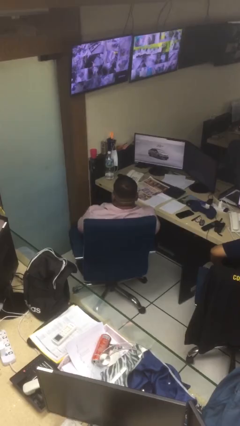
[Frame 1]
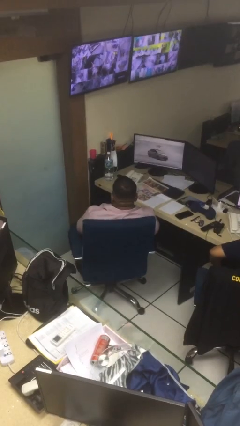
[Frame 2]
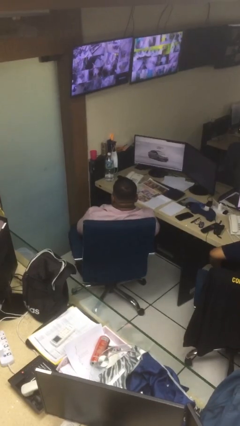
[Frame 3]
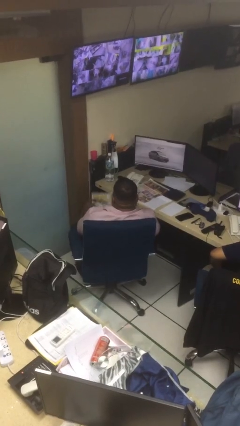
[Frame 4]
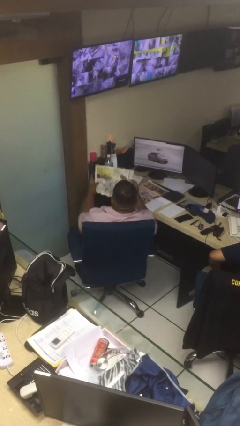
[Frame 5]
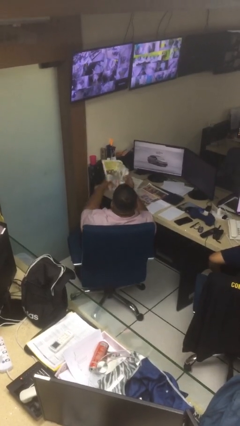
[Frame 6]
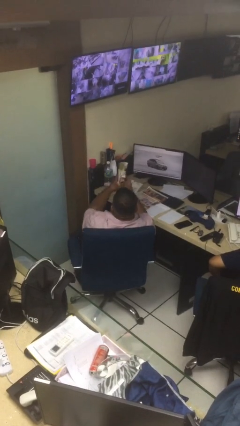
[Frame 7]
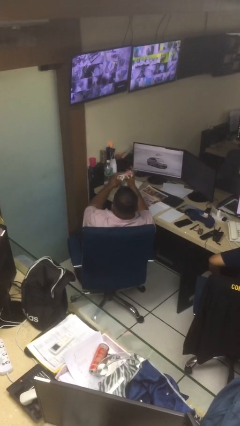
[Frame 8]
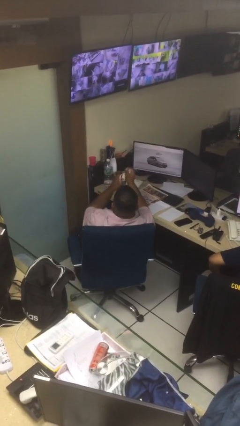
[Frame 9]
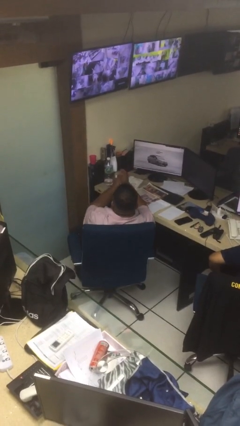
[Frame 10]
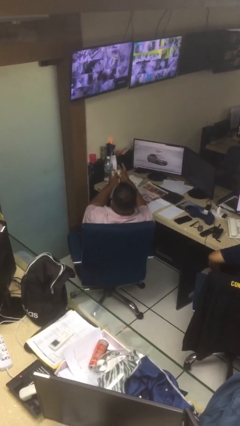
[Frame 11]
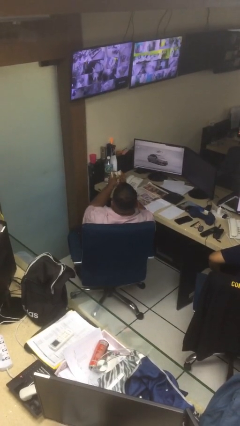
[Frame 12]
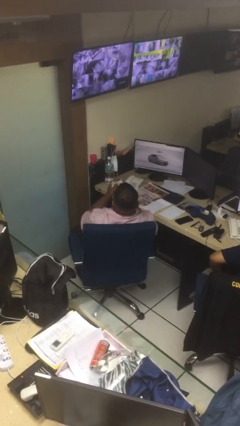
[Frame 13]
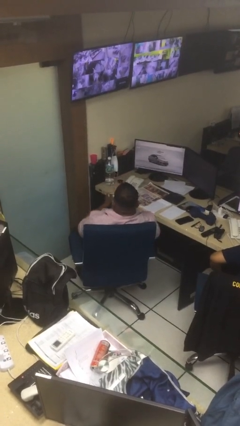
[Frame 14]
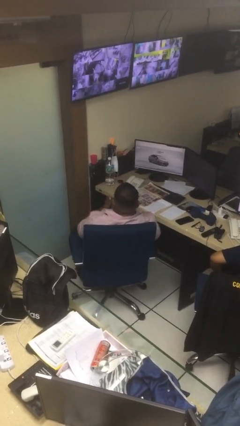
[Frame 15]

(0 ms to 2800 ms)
person crumples paper

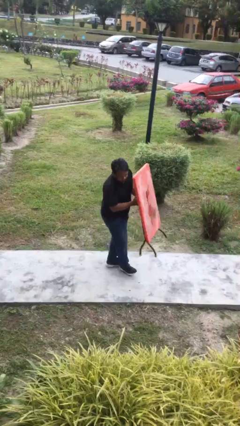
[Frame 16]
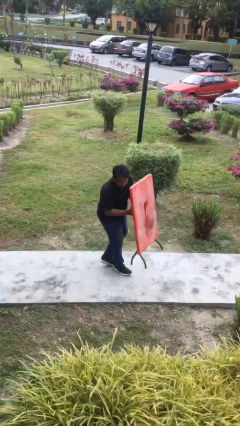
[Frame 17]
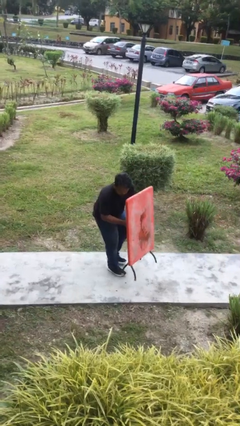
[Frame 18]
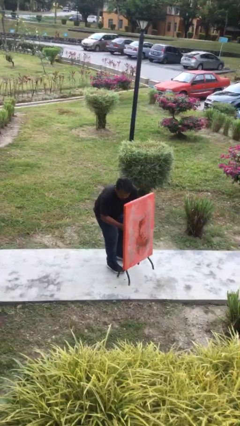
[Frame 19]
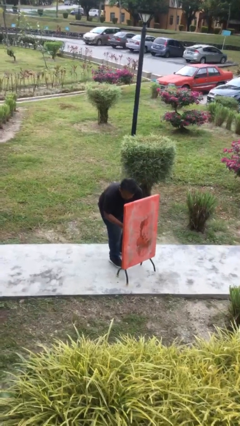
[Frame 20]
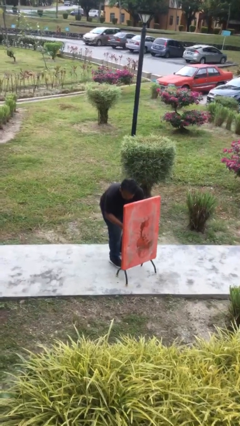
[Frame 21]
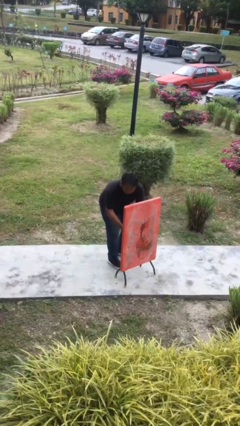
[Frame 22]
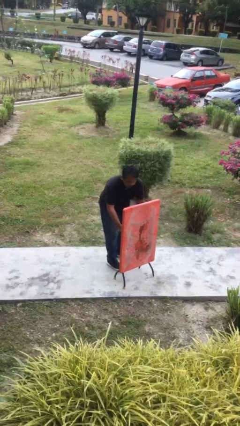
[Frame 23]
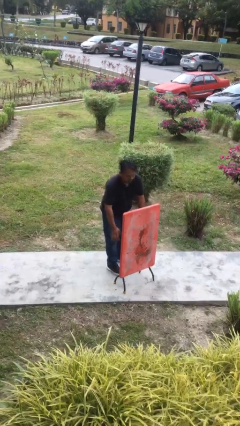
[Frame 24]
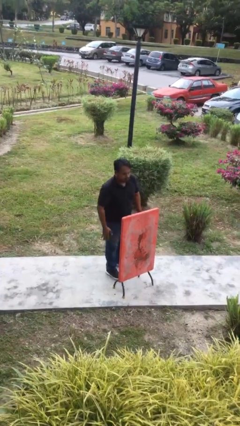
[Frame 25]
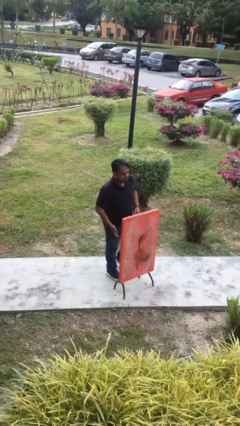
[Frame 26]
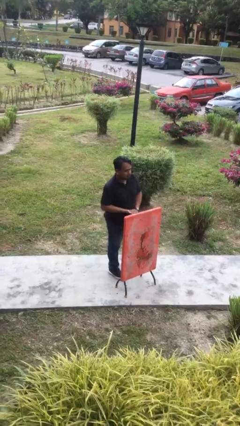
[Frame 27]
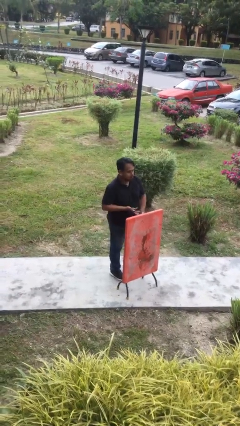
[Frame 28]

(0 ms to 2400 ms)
person puts down object on floor

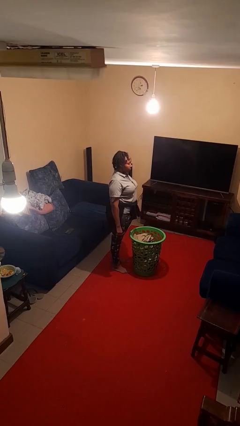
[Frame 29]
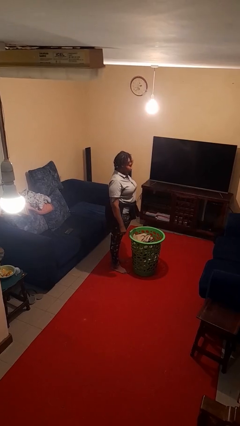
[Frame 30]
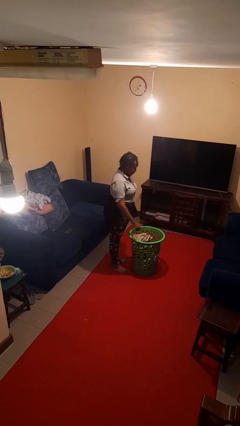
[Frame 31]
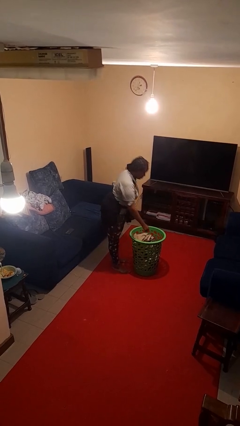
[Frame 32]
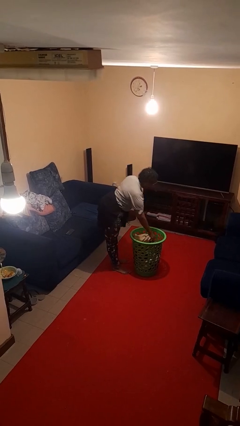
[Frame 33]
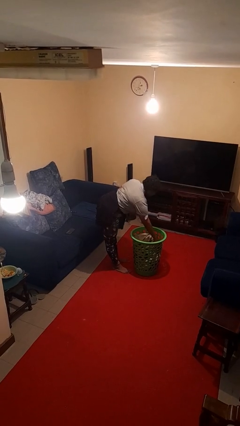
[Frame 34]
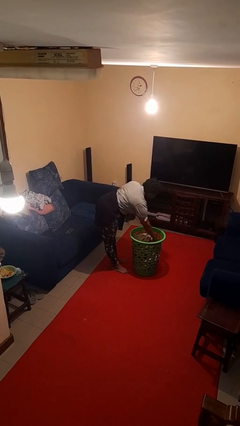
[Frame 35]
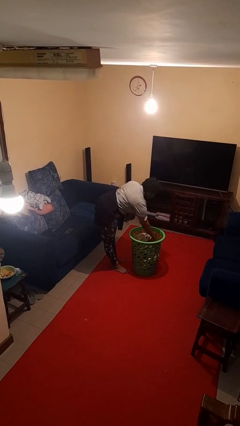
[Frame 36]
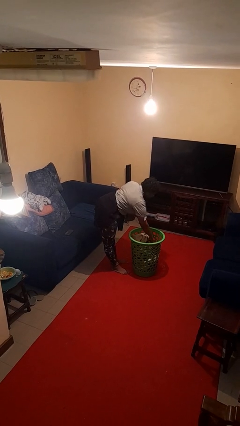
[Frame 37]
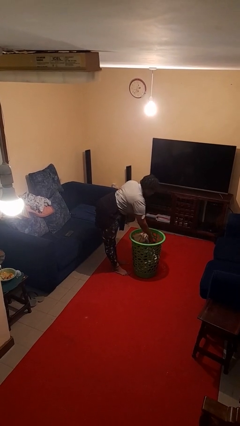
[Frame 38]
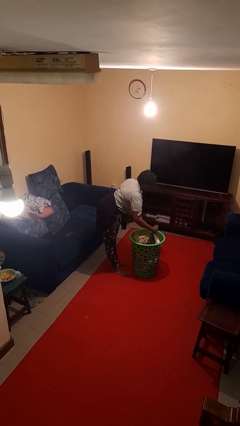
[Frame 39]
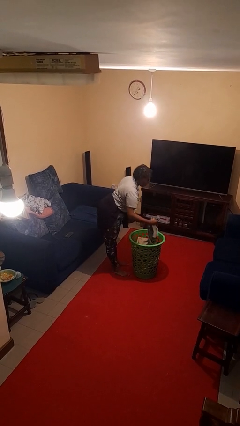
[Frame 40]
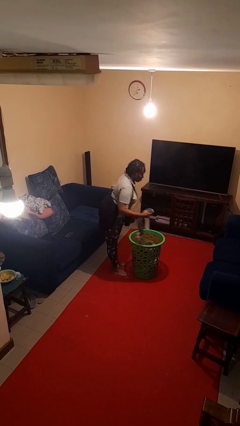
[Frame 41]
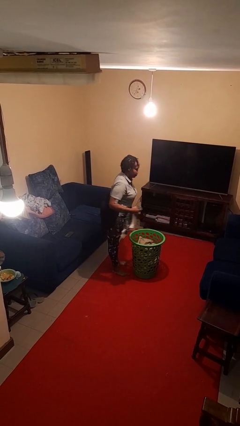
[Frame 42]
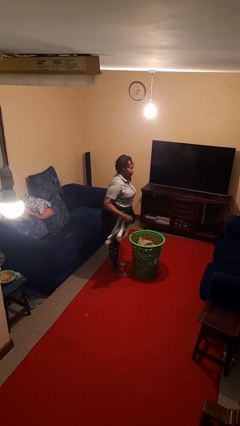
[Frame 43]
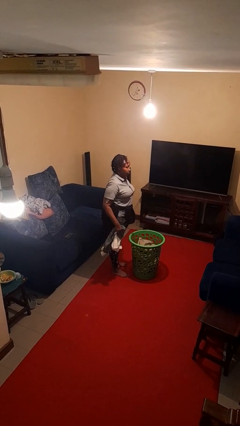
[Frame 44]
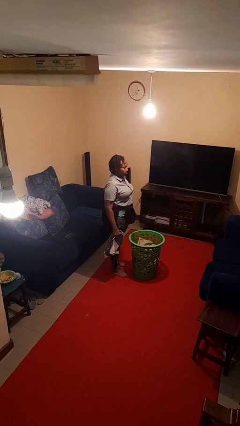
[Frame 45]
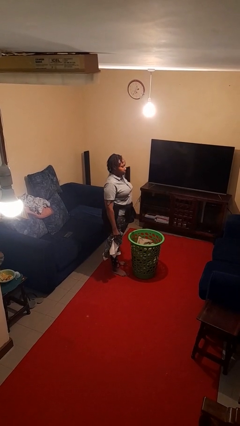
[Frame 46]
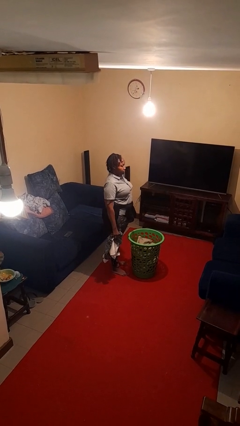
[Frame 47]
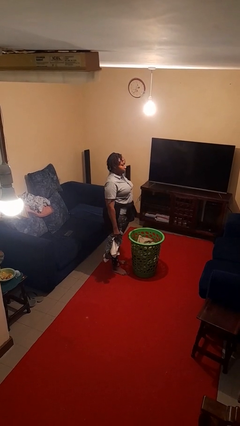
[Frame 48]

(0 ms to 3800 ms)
person takes object from basket

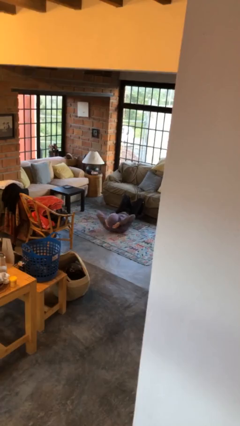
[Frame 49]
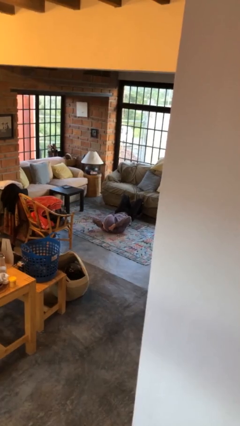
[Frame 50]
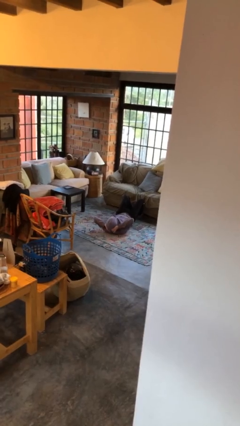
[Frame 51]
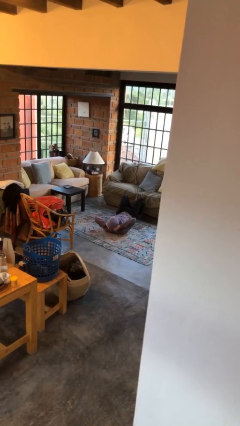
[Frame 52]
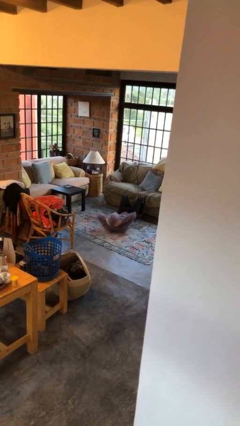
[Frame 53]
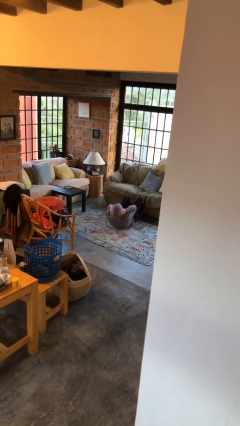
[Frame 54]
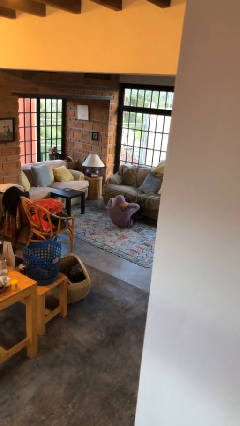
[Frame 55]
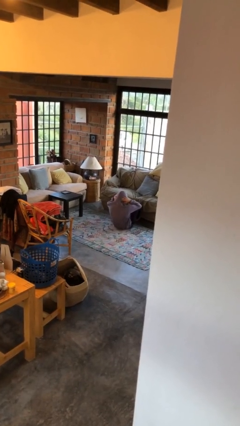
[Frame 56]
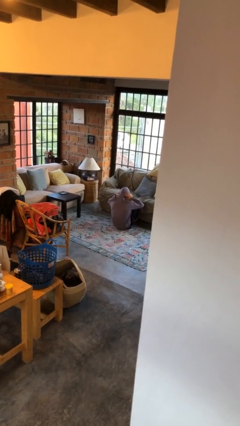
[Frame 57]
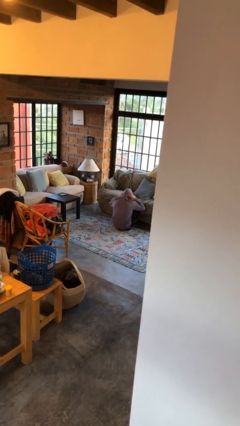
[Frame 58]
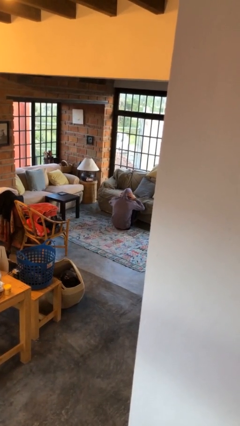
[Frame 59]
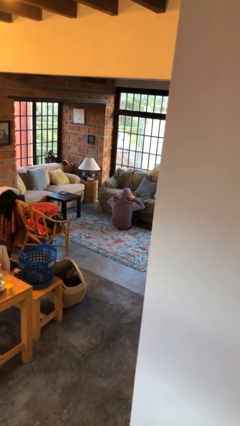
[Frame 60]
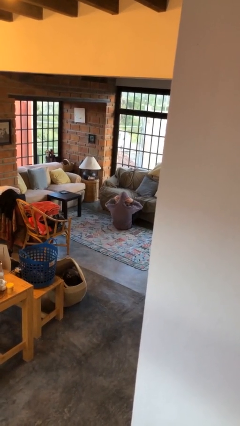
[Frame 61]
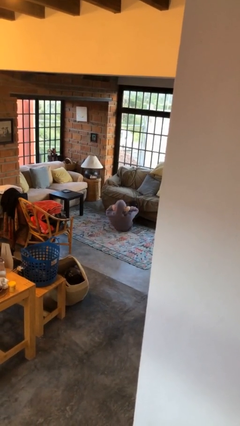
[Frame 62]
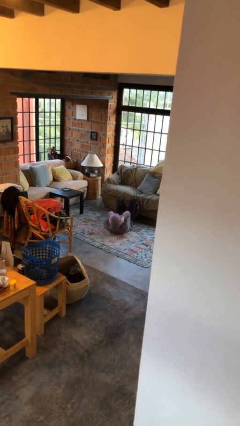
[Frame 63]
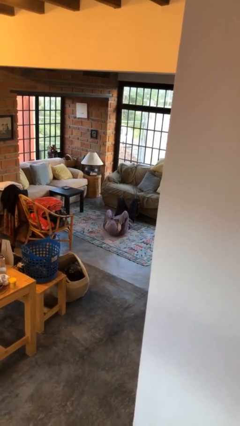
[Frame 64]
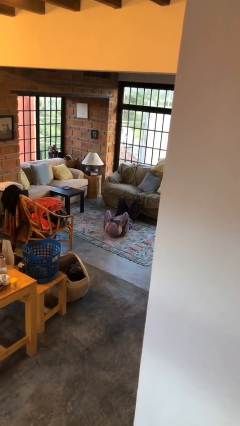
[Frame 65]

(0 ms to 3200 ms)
person exercises with situp

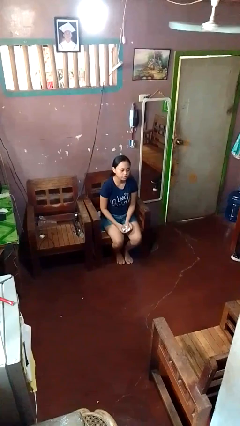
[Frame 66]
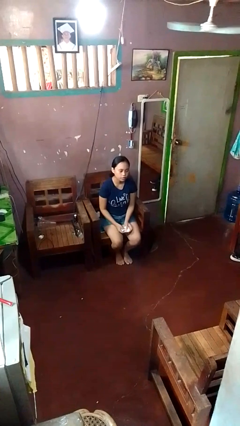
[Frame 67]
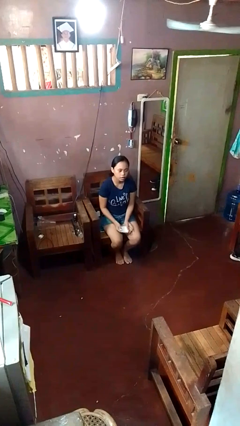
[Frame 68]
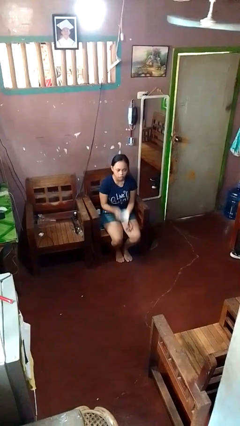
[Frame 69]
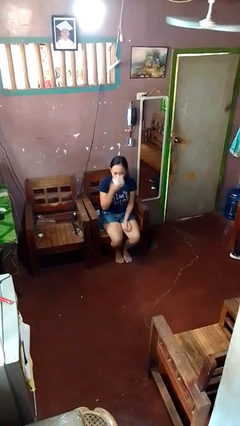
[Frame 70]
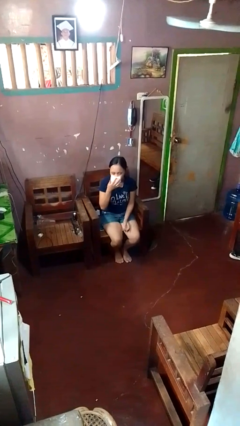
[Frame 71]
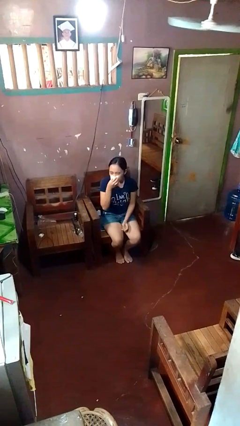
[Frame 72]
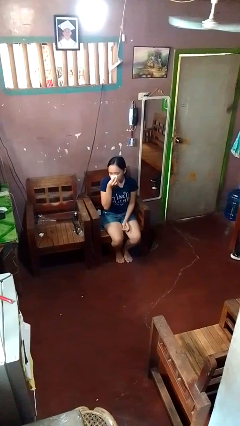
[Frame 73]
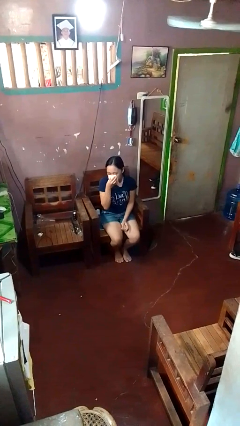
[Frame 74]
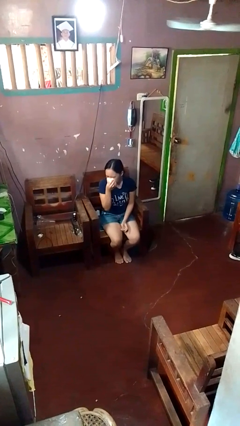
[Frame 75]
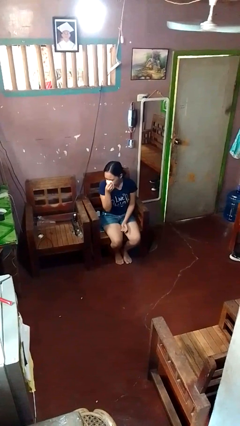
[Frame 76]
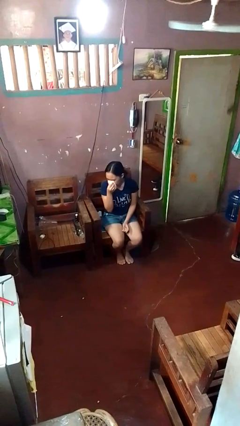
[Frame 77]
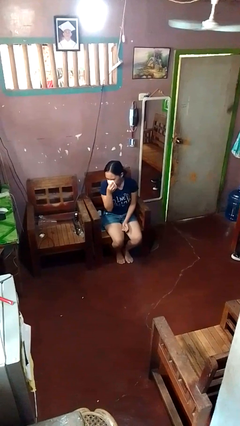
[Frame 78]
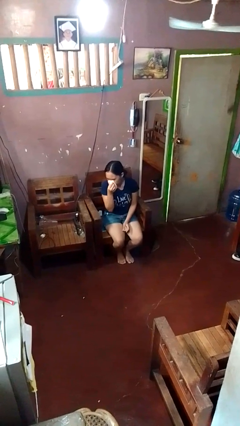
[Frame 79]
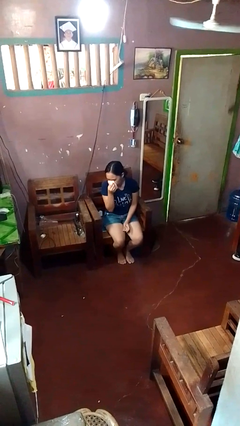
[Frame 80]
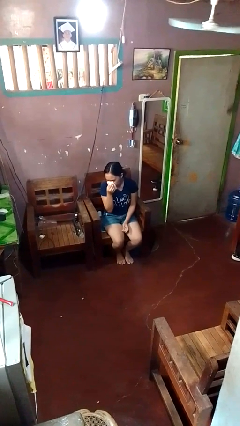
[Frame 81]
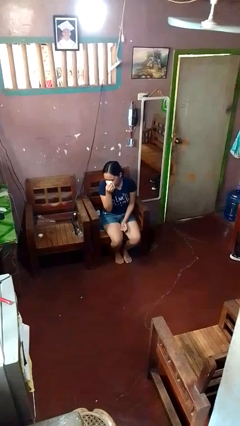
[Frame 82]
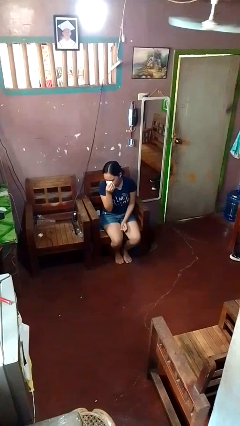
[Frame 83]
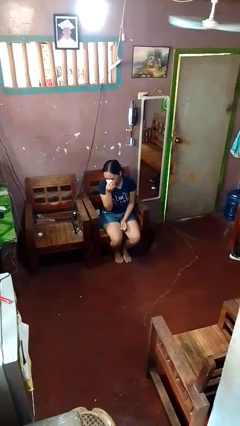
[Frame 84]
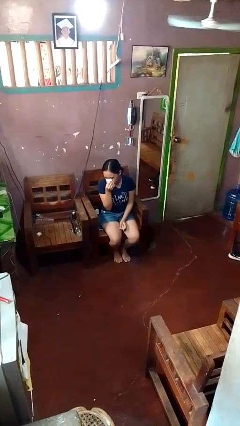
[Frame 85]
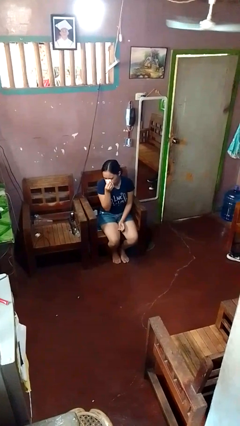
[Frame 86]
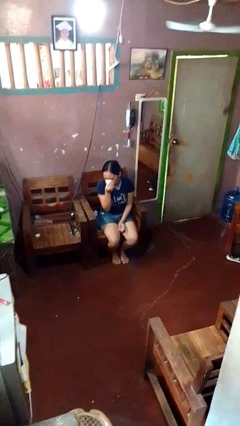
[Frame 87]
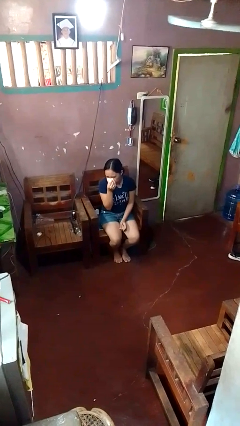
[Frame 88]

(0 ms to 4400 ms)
person blows nose

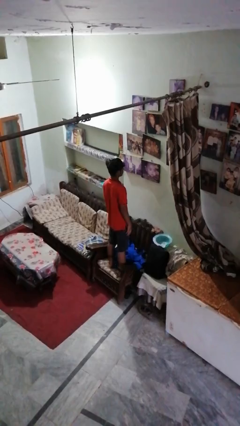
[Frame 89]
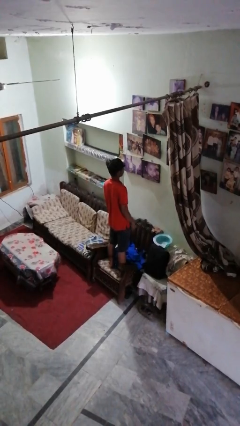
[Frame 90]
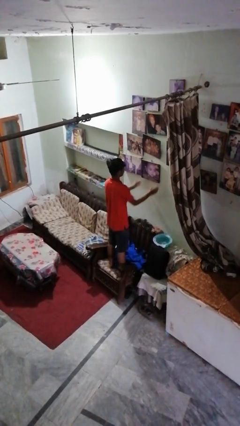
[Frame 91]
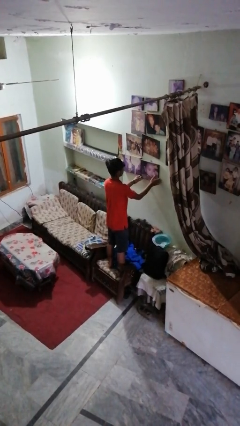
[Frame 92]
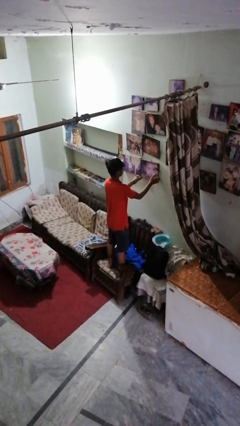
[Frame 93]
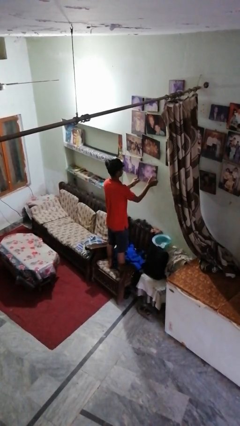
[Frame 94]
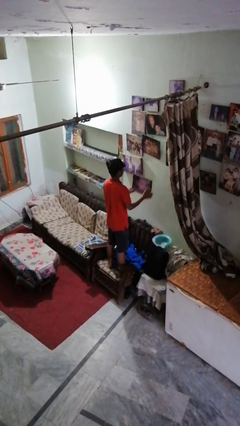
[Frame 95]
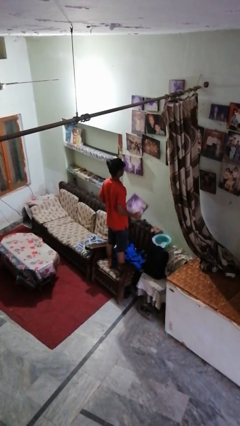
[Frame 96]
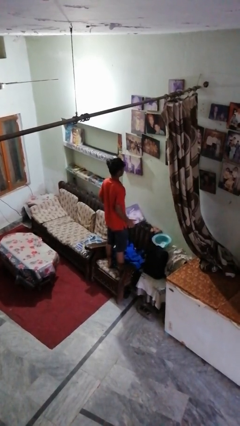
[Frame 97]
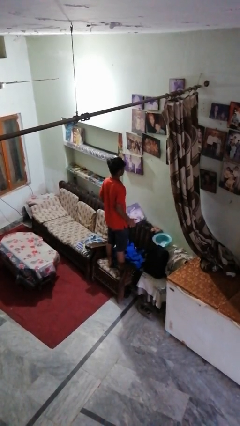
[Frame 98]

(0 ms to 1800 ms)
person takes down picture frame
